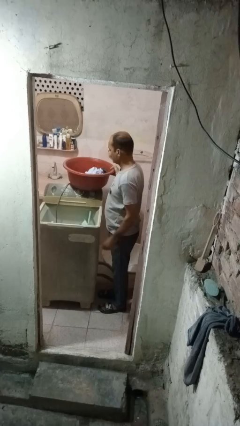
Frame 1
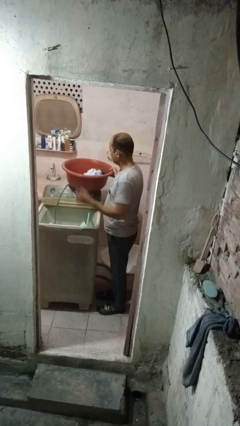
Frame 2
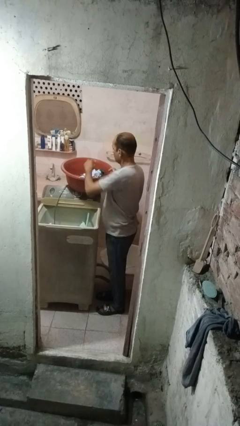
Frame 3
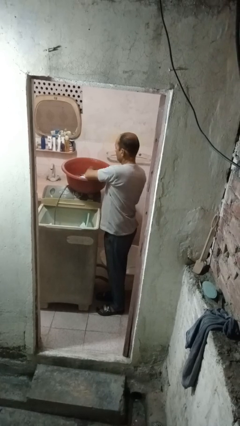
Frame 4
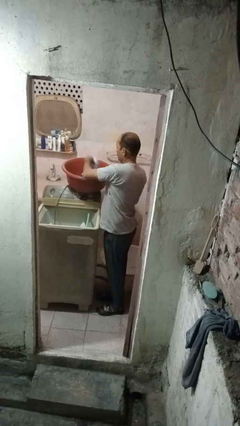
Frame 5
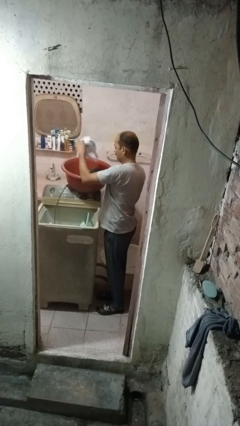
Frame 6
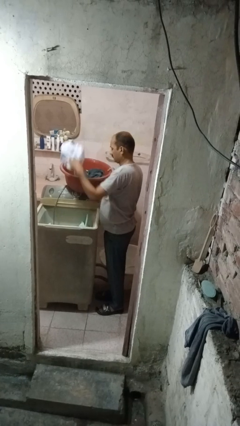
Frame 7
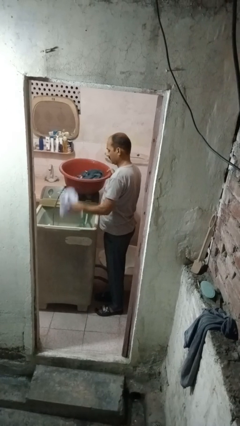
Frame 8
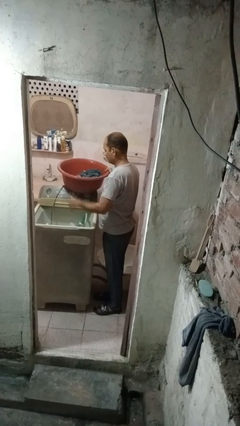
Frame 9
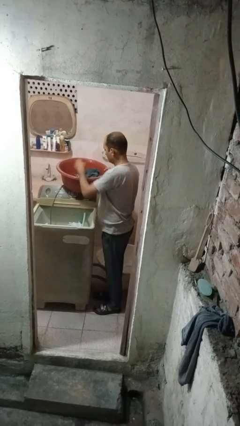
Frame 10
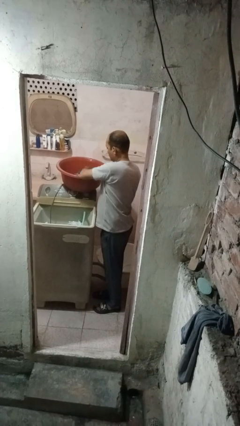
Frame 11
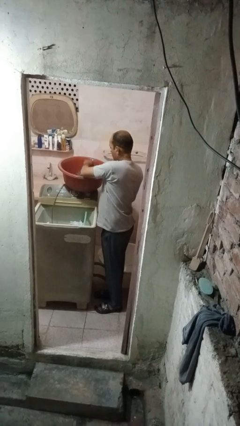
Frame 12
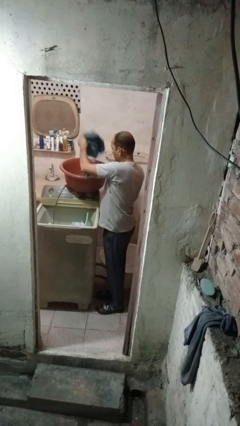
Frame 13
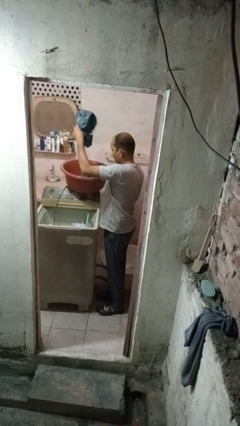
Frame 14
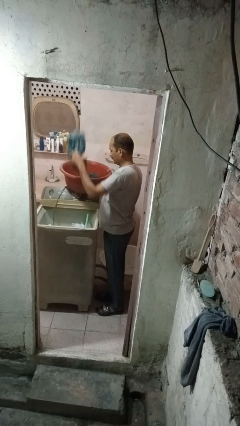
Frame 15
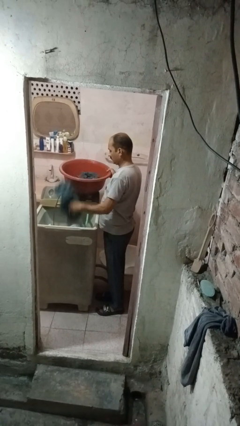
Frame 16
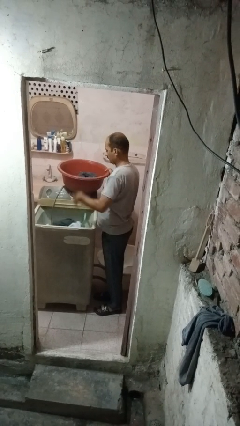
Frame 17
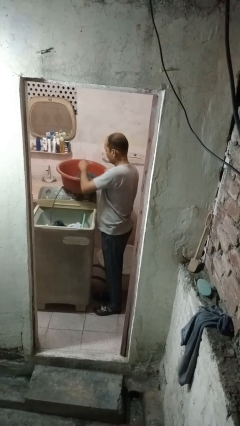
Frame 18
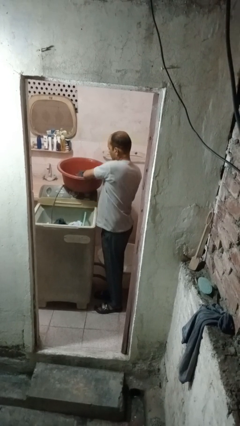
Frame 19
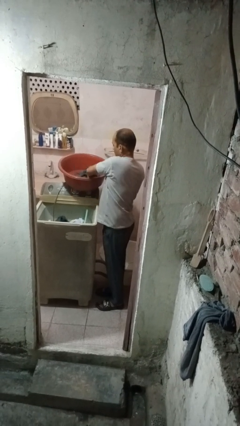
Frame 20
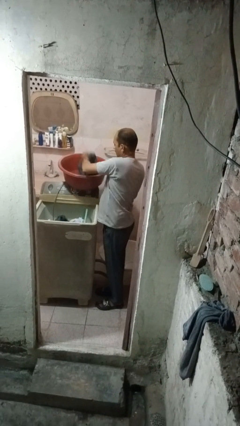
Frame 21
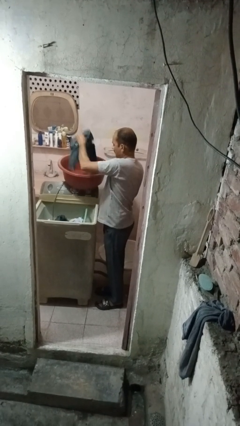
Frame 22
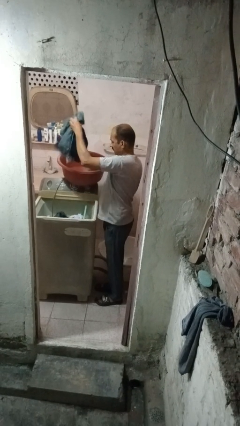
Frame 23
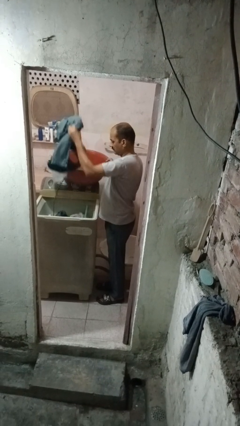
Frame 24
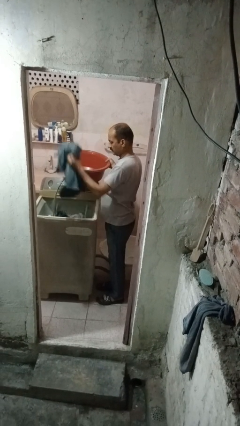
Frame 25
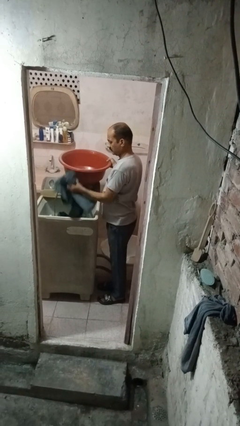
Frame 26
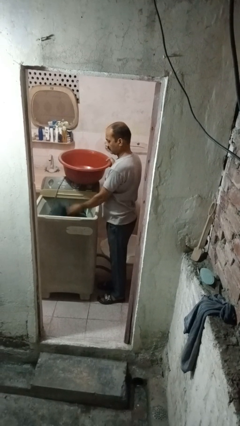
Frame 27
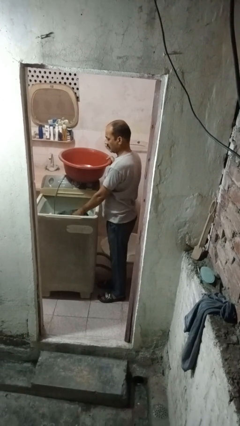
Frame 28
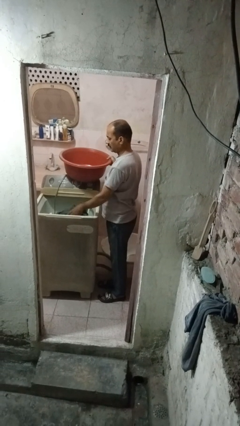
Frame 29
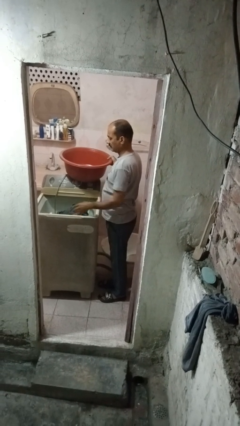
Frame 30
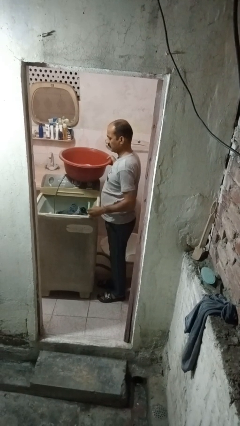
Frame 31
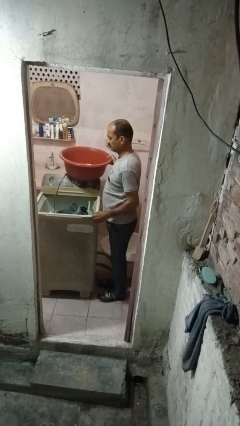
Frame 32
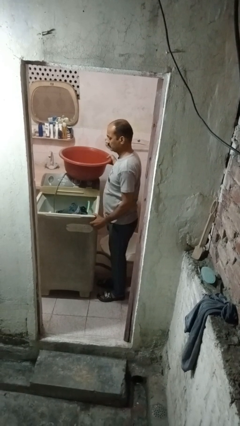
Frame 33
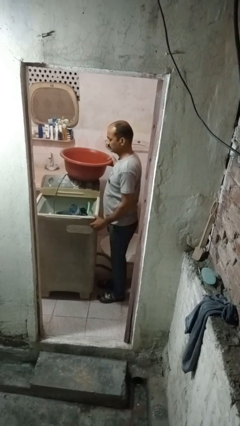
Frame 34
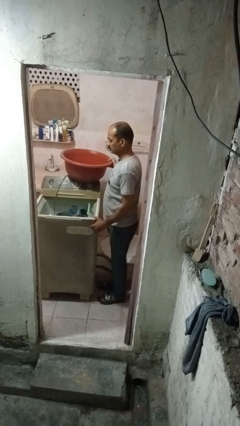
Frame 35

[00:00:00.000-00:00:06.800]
person loads dishwasher

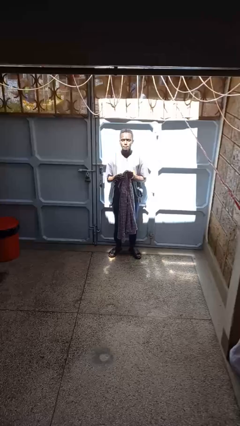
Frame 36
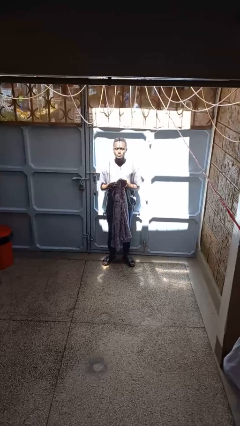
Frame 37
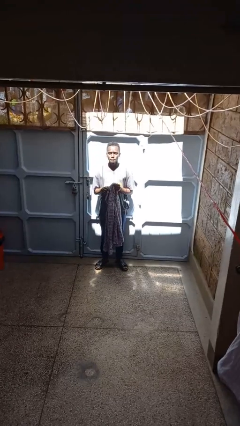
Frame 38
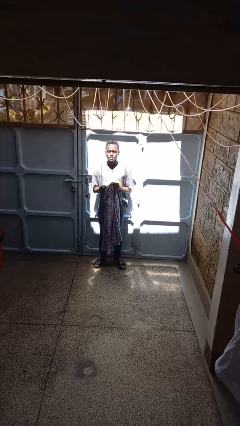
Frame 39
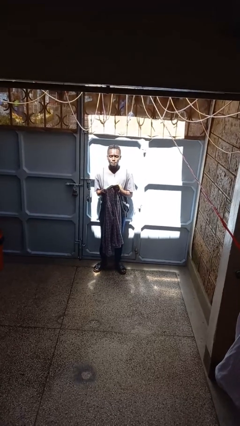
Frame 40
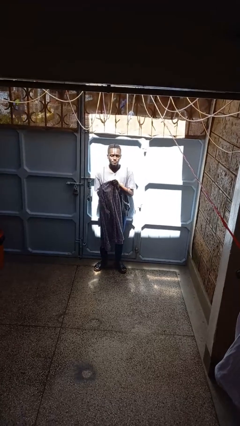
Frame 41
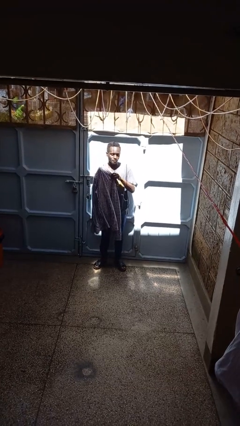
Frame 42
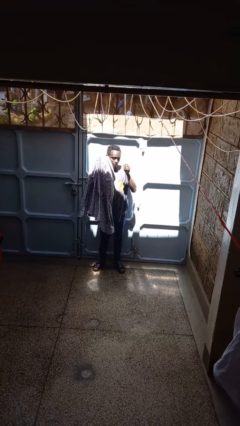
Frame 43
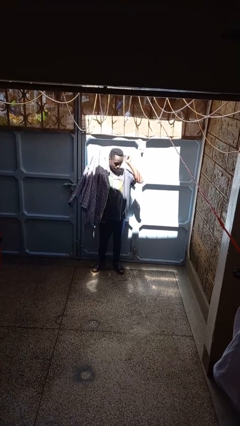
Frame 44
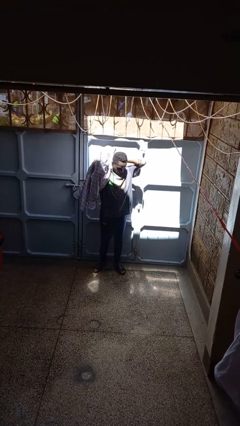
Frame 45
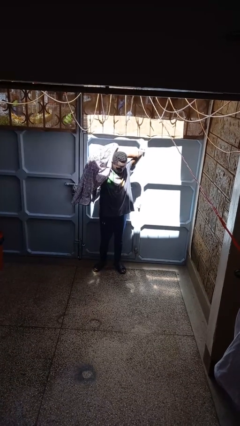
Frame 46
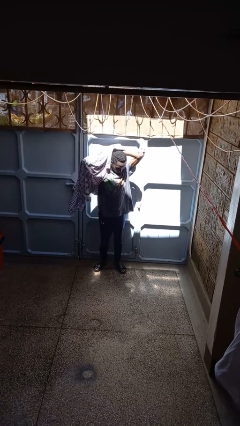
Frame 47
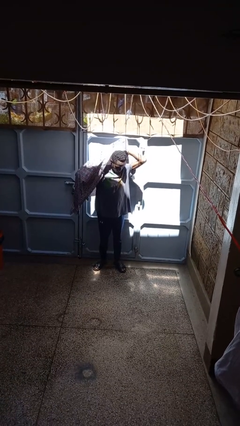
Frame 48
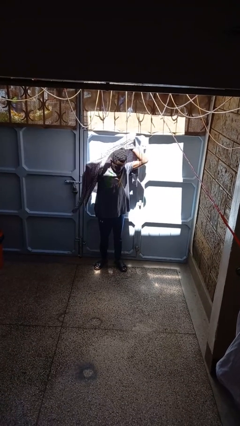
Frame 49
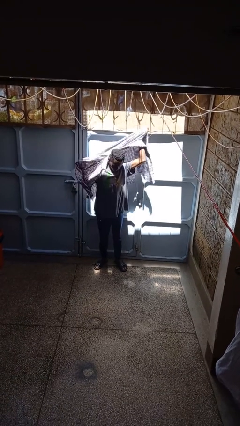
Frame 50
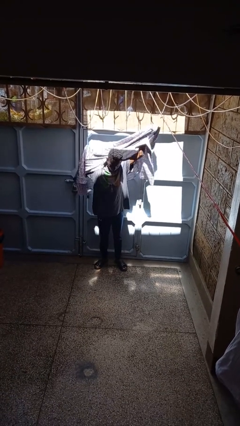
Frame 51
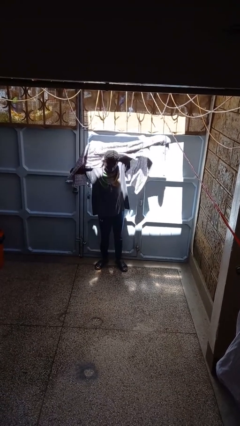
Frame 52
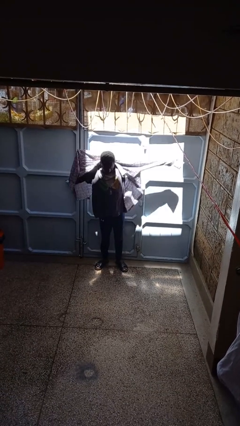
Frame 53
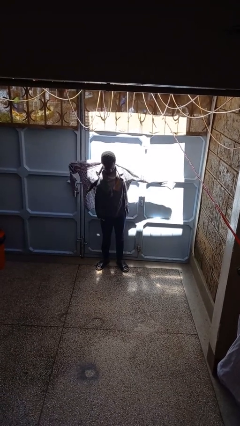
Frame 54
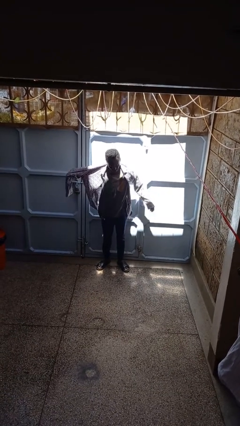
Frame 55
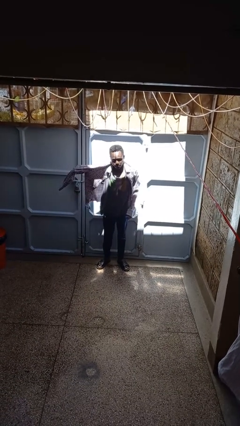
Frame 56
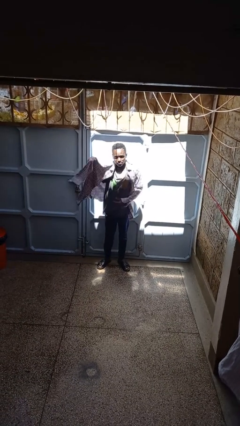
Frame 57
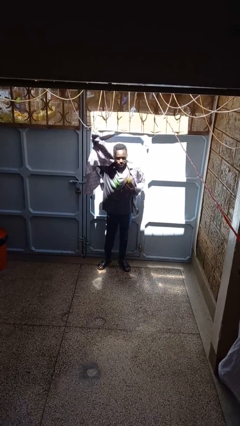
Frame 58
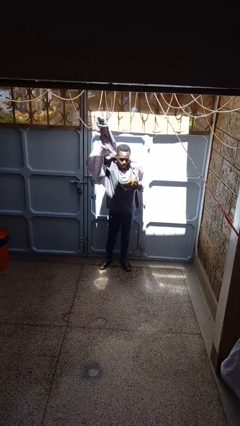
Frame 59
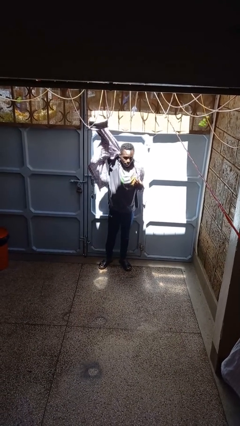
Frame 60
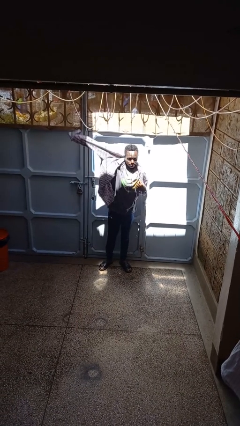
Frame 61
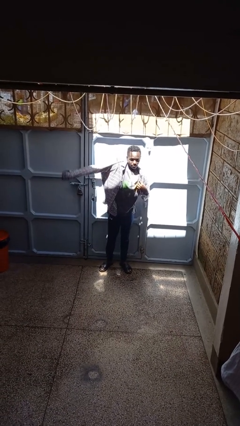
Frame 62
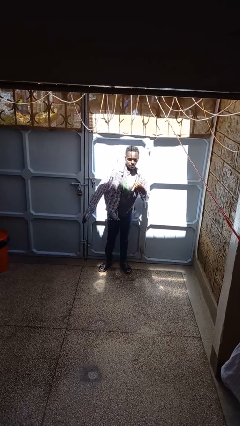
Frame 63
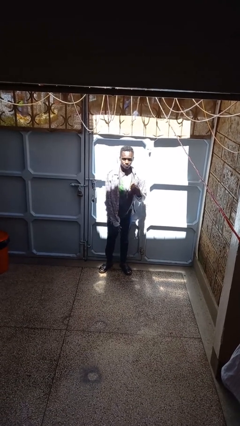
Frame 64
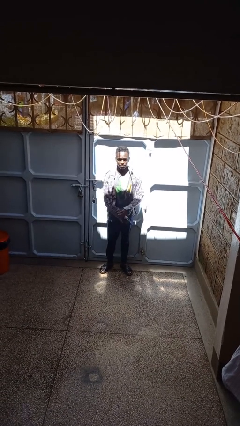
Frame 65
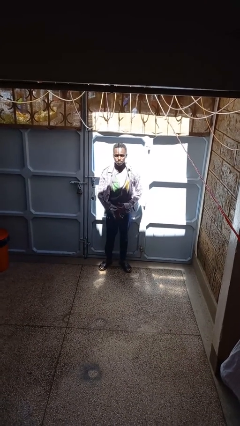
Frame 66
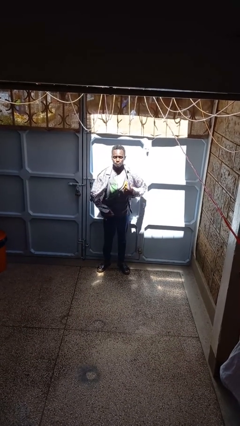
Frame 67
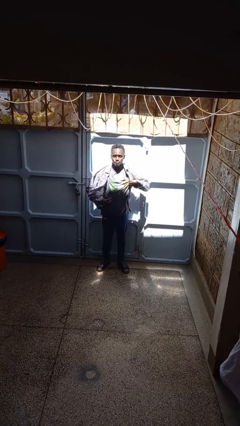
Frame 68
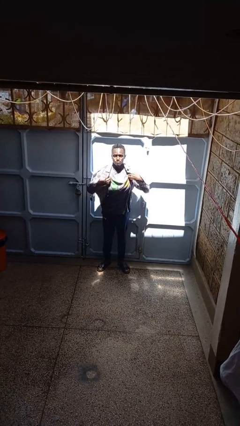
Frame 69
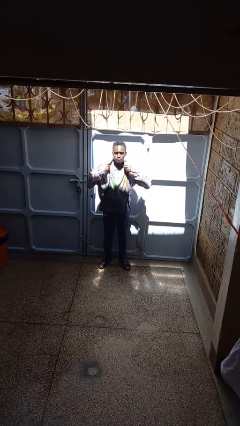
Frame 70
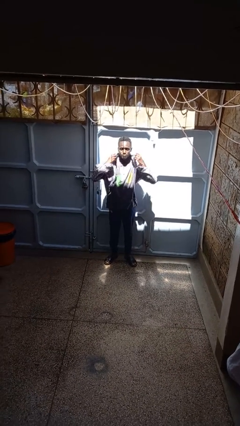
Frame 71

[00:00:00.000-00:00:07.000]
person puts on shirt

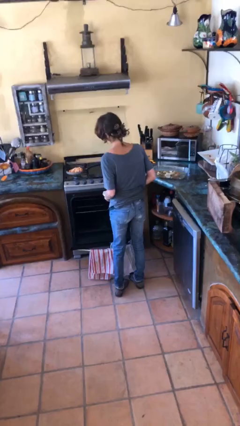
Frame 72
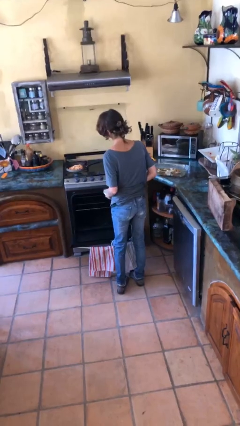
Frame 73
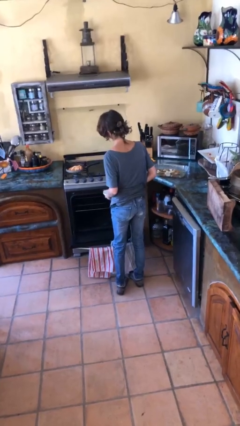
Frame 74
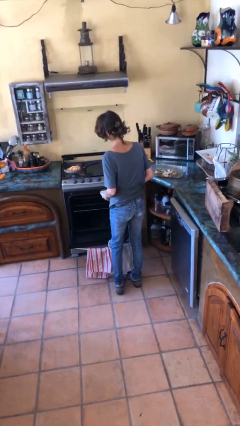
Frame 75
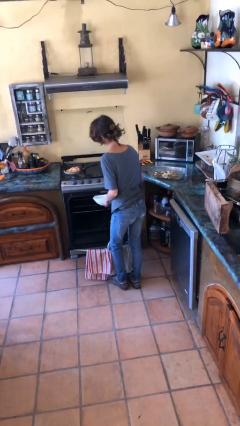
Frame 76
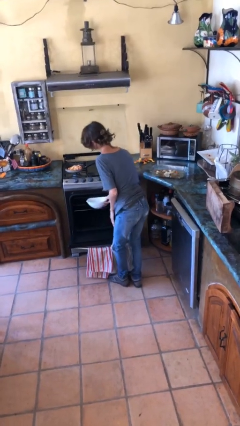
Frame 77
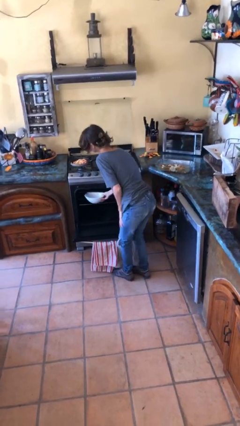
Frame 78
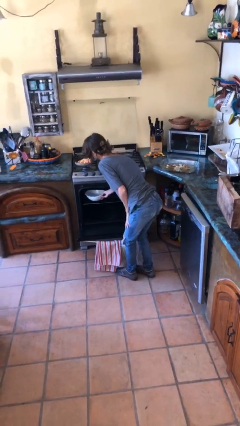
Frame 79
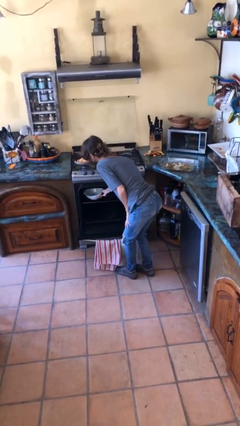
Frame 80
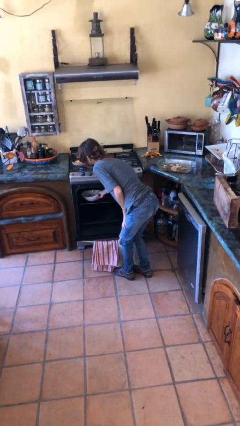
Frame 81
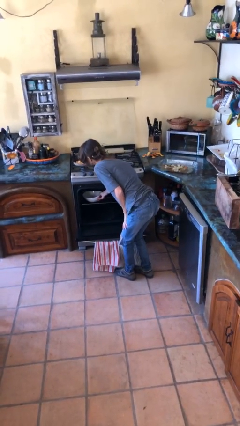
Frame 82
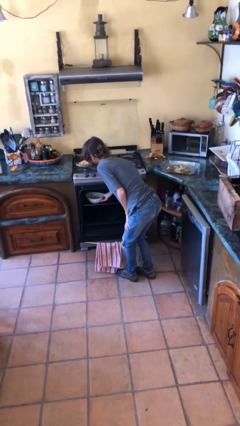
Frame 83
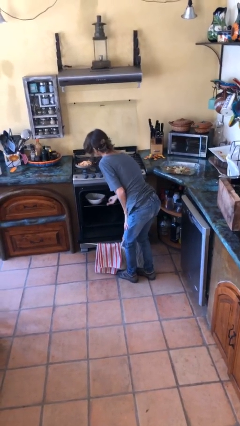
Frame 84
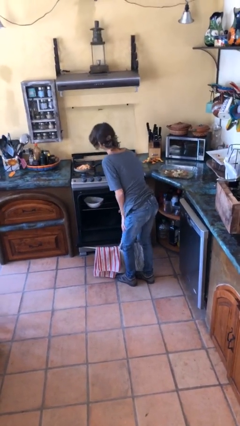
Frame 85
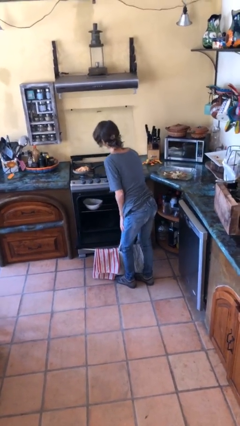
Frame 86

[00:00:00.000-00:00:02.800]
person puts object into oven

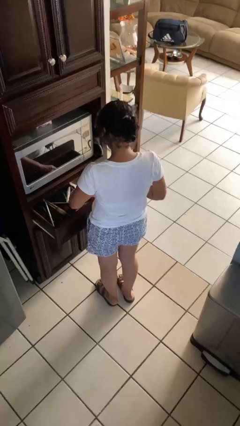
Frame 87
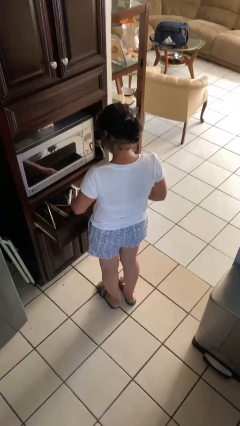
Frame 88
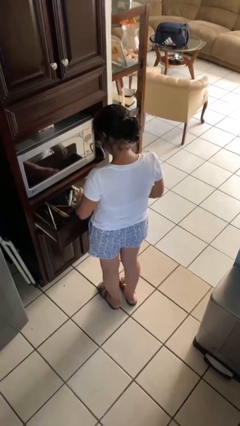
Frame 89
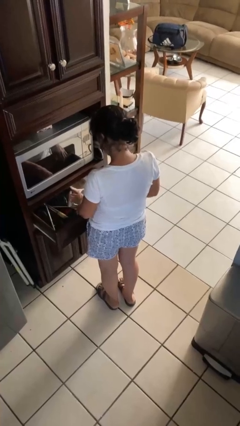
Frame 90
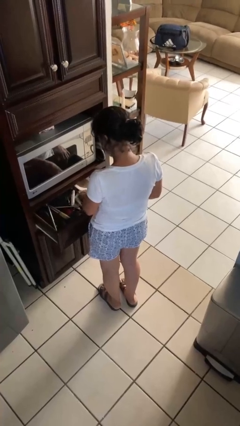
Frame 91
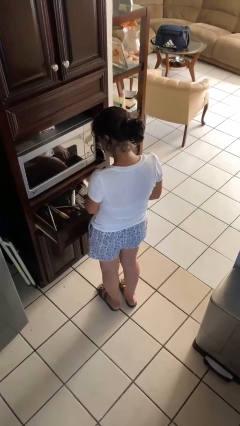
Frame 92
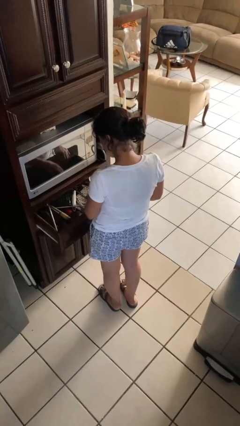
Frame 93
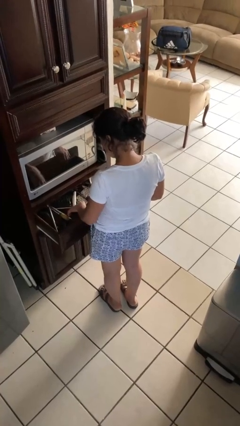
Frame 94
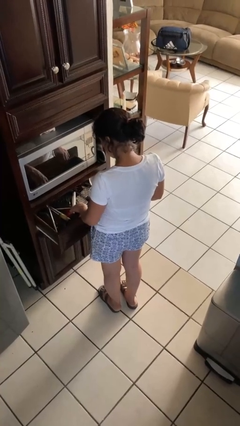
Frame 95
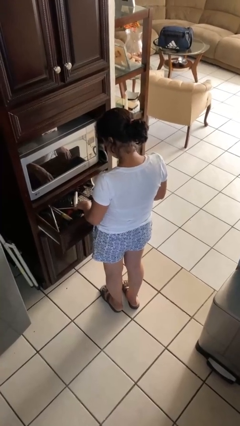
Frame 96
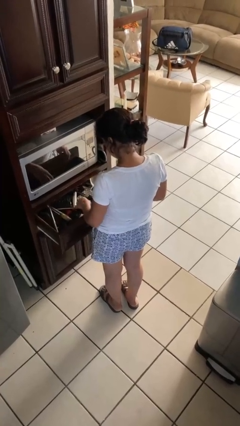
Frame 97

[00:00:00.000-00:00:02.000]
person searches in kitchen drawer
